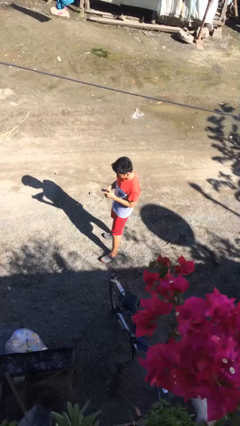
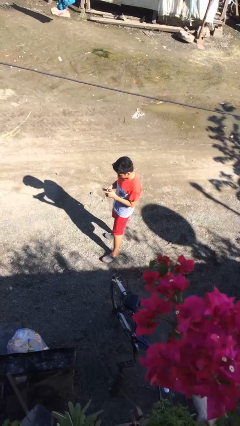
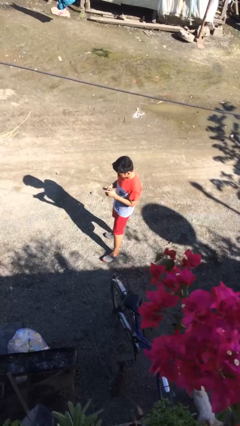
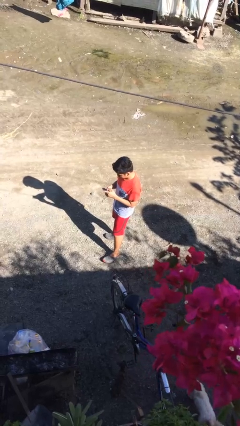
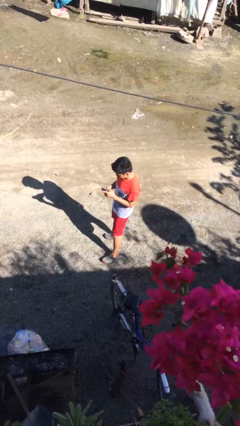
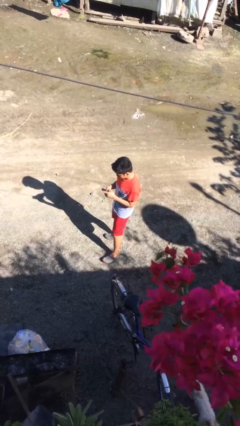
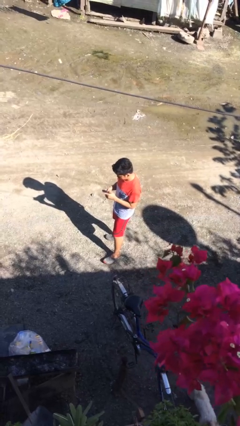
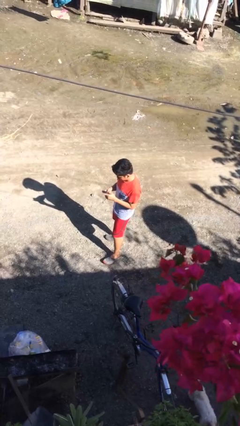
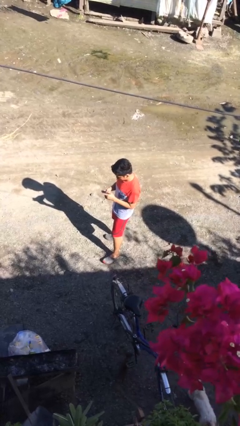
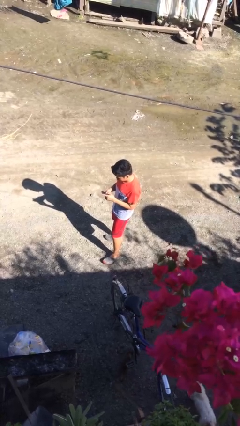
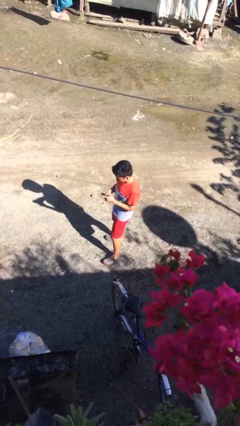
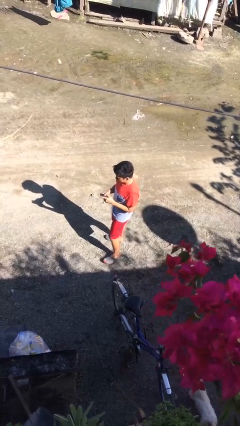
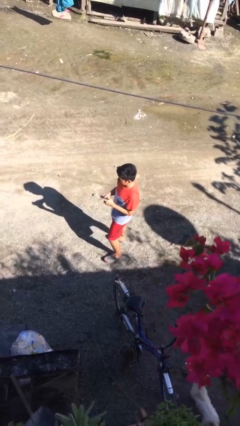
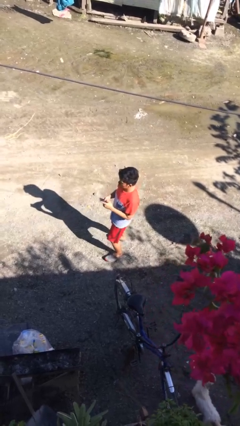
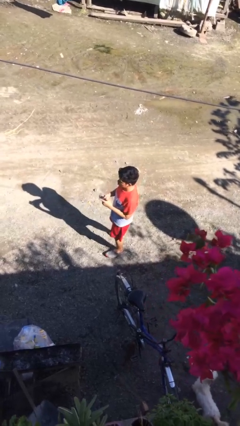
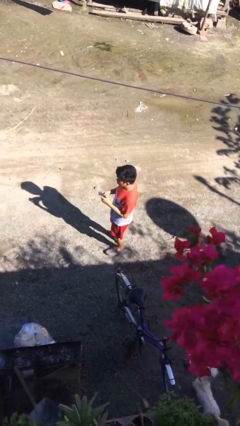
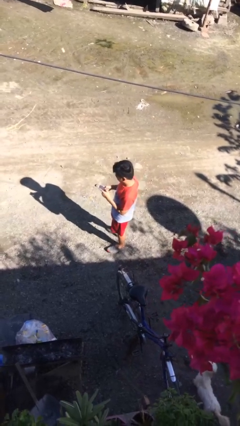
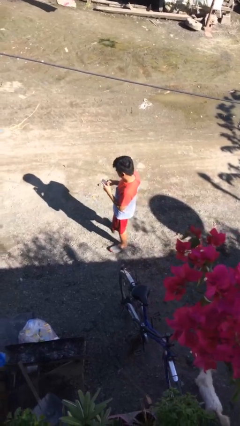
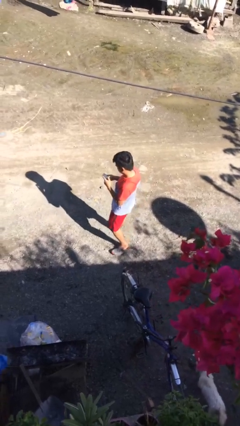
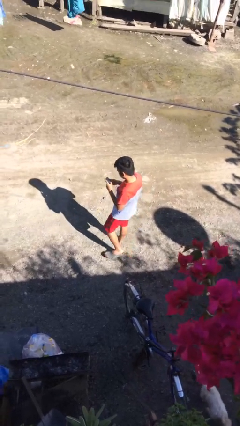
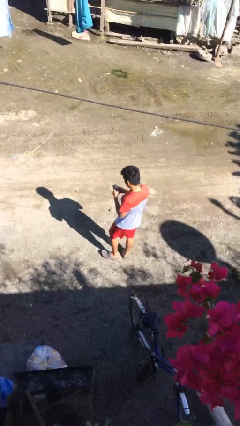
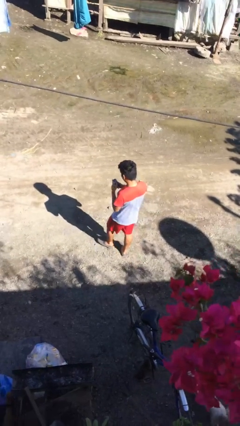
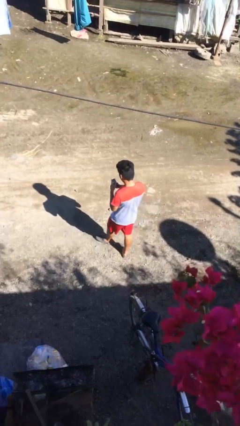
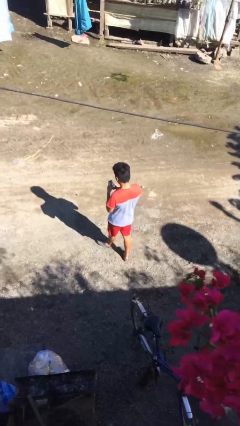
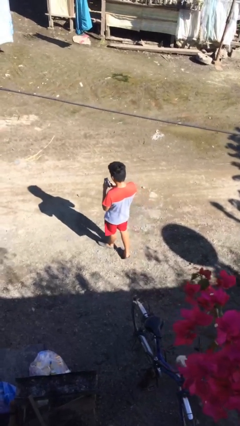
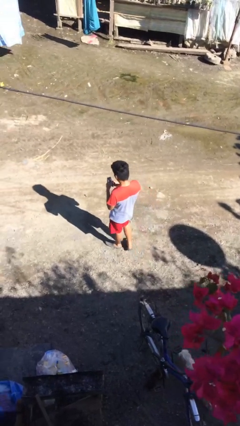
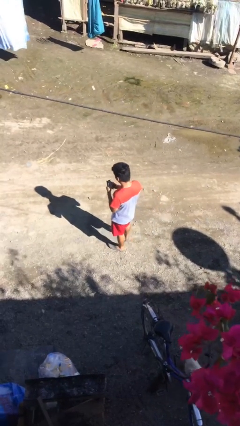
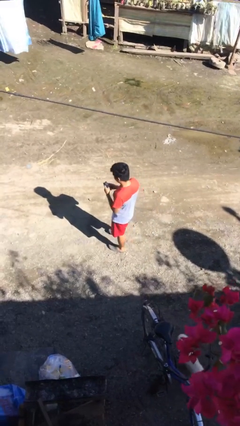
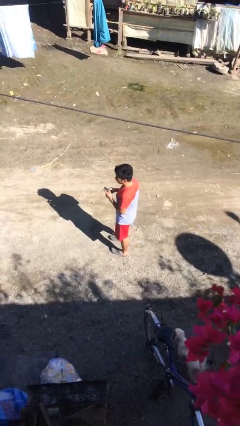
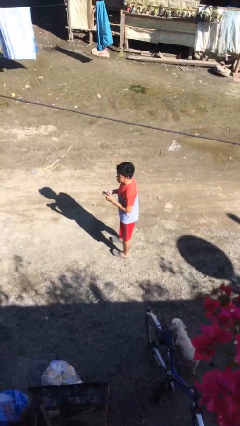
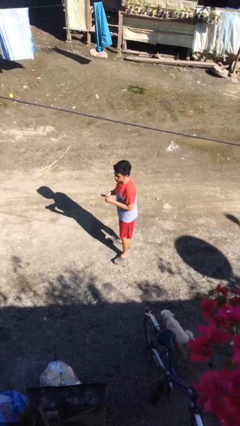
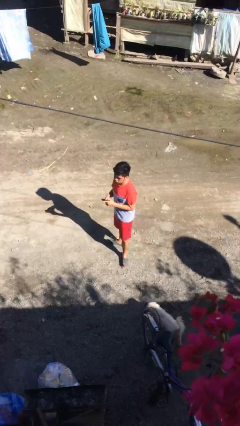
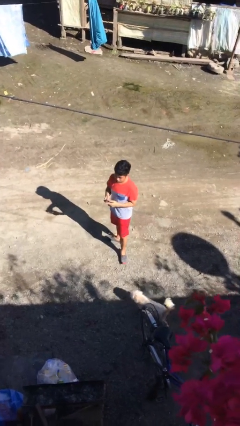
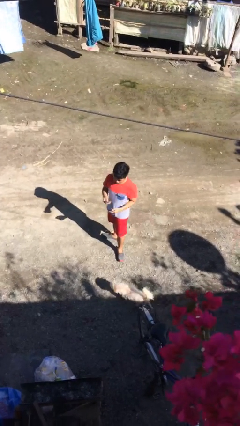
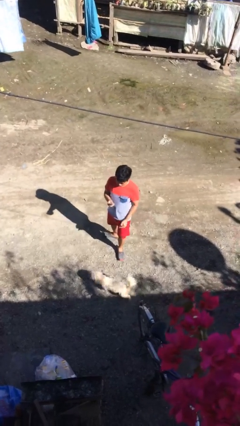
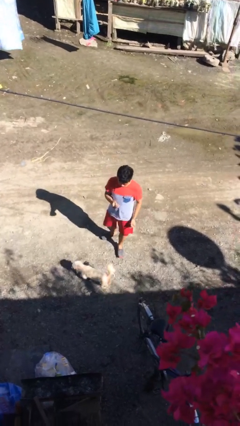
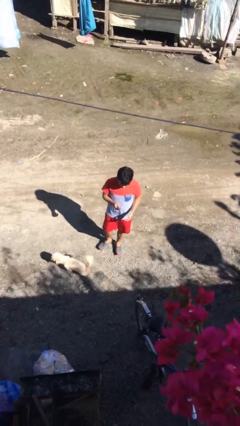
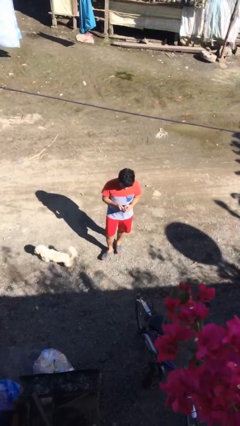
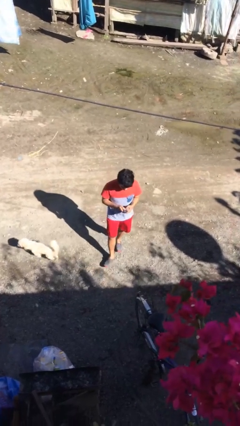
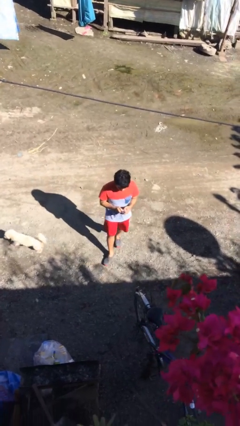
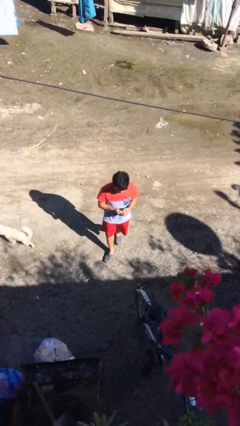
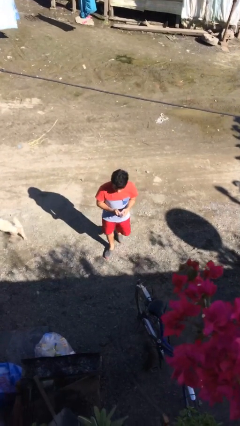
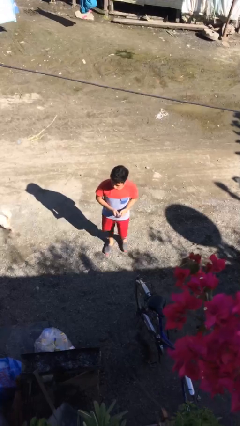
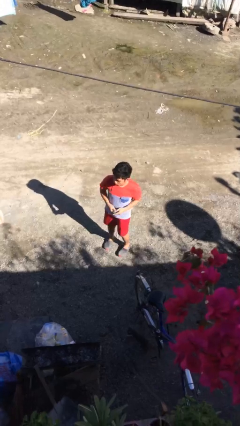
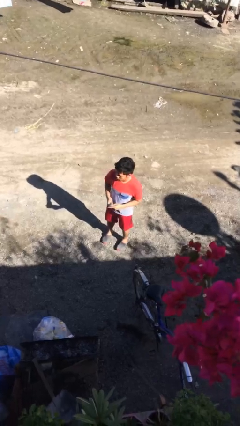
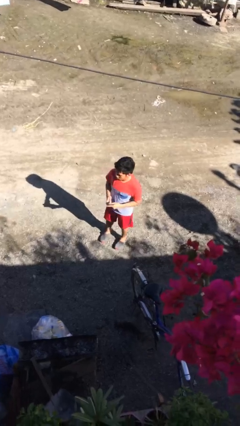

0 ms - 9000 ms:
person walks

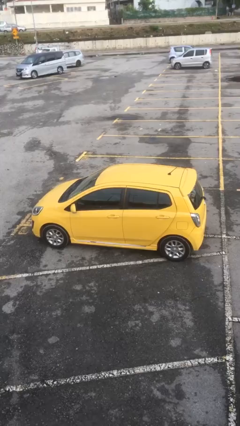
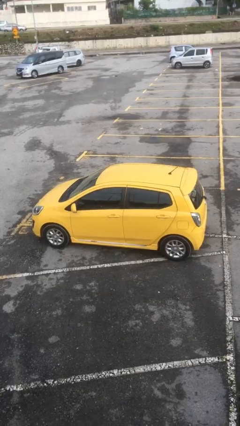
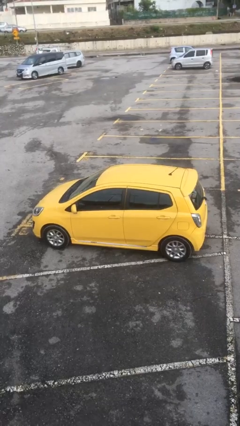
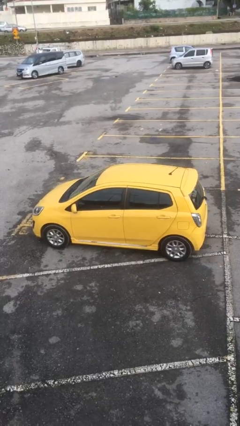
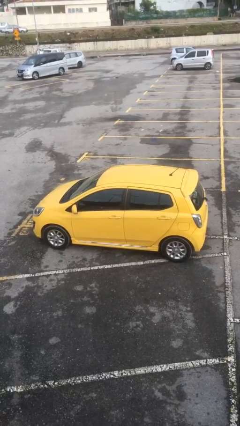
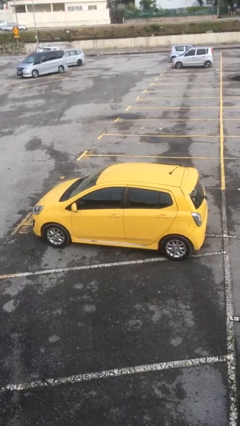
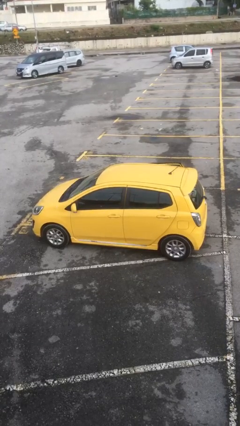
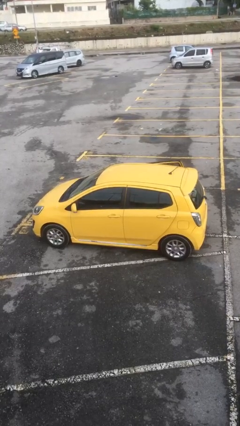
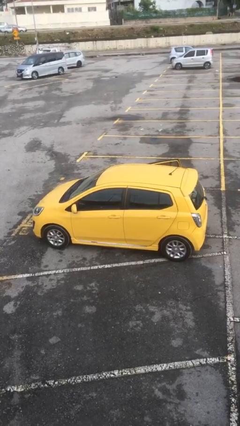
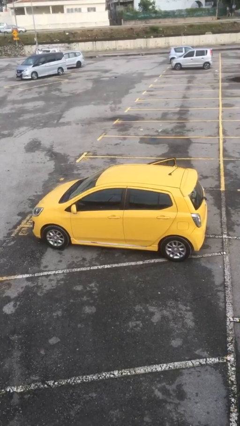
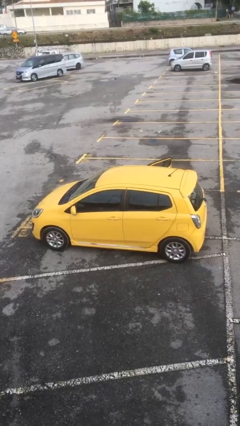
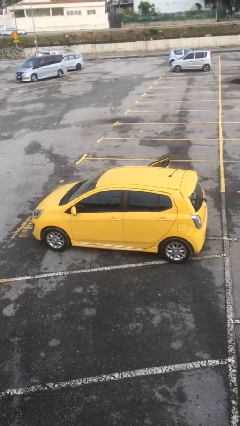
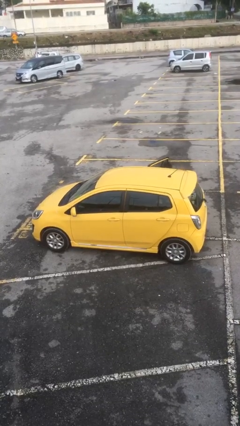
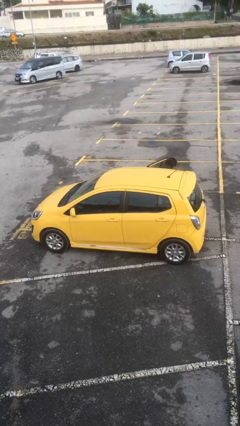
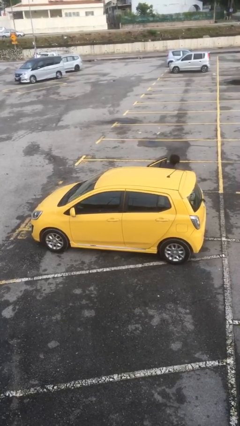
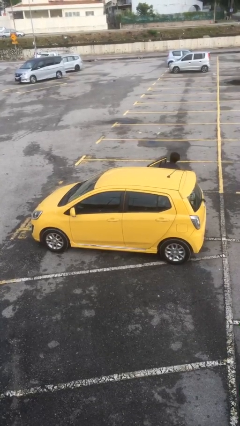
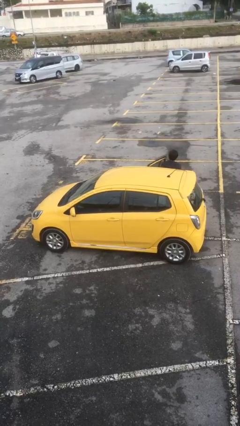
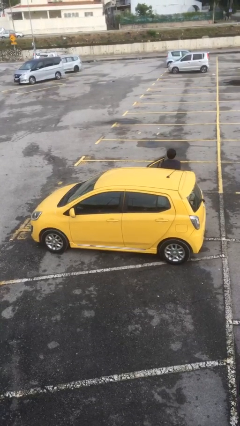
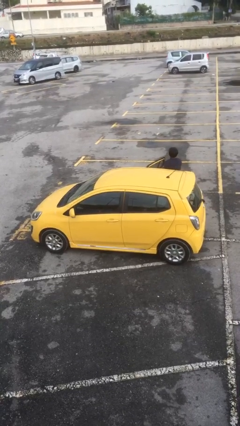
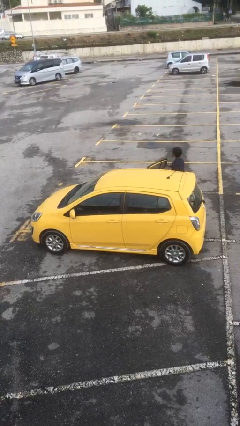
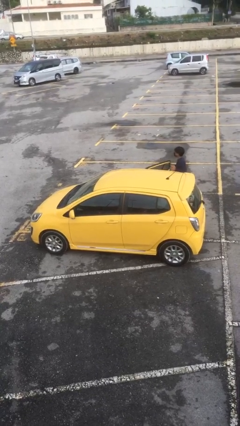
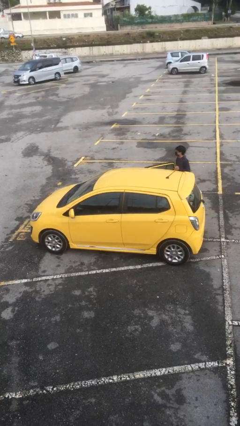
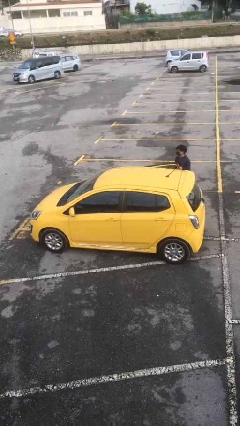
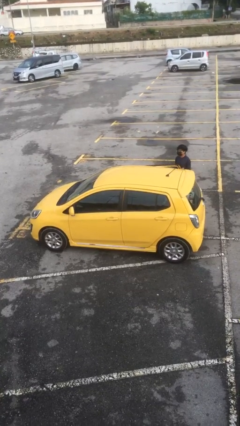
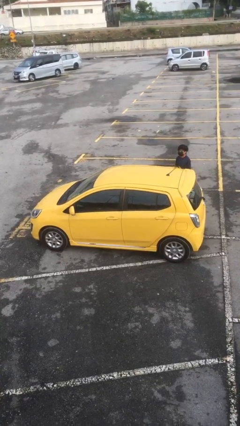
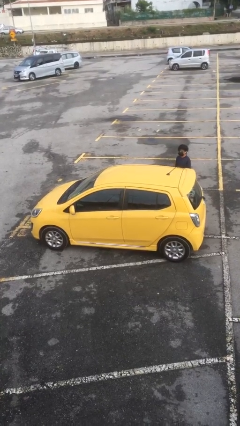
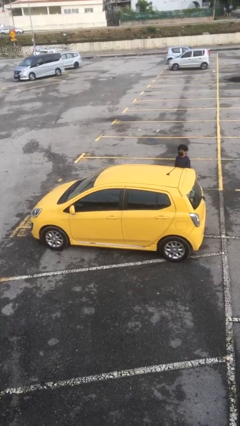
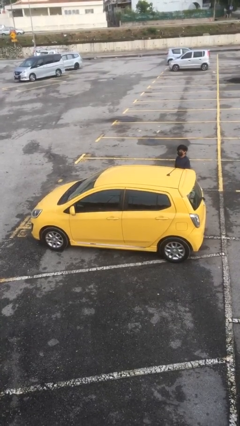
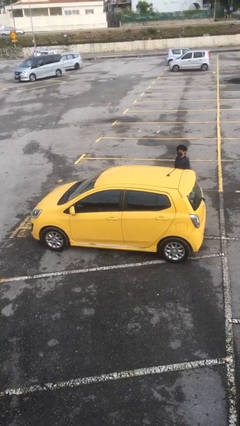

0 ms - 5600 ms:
car drops off person

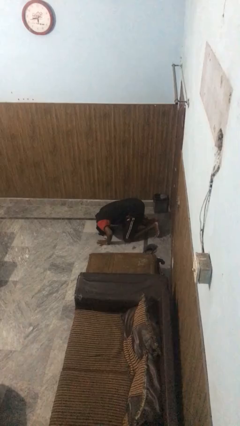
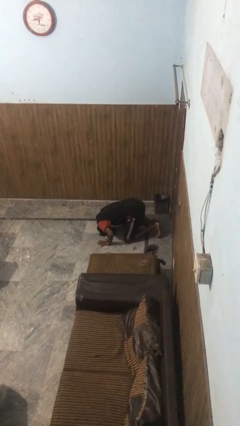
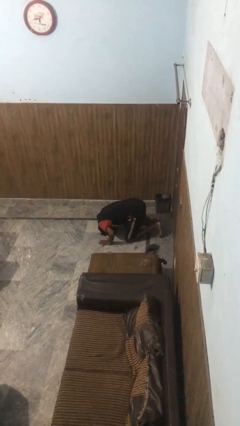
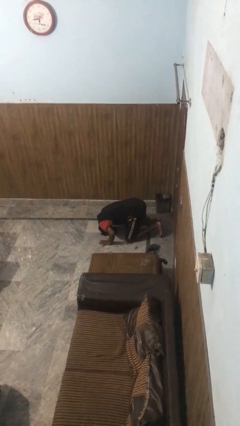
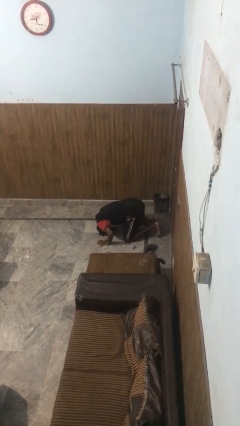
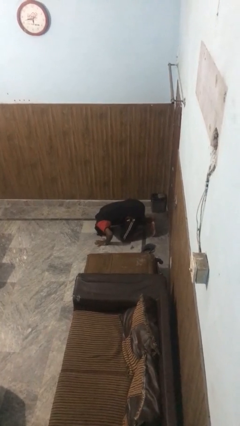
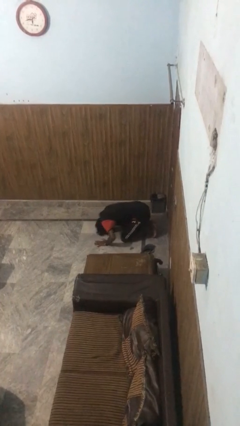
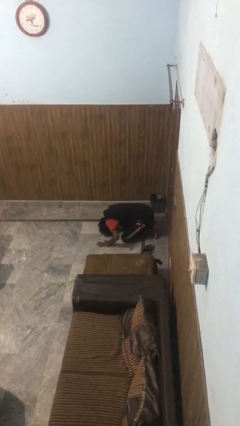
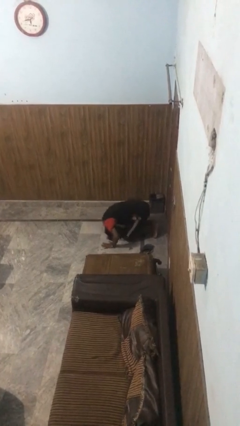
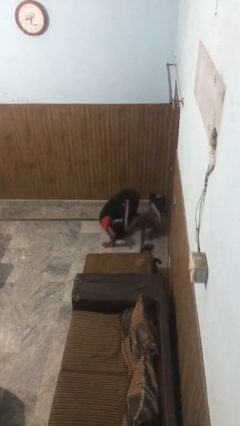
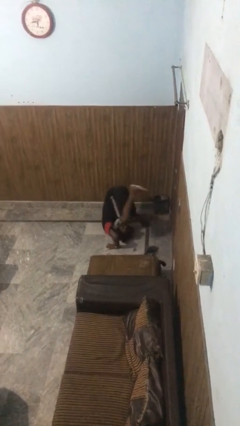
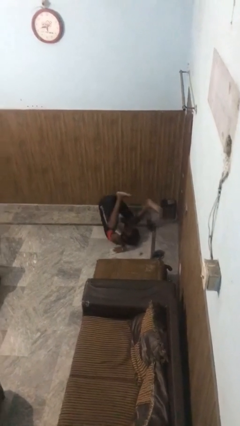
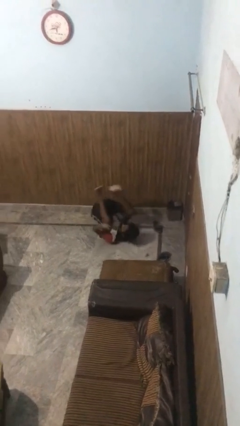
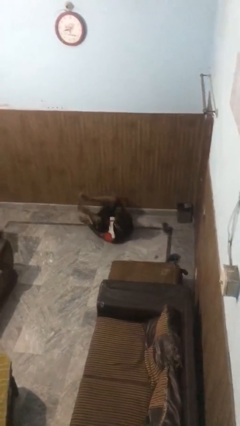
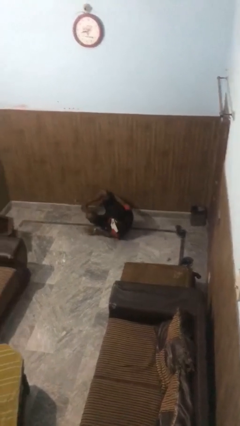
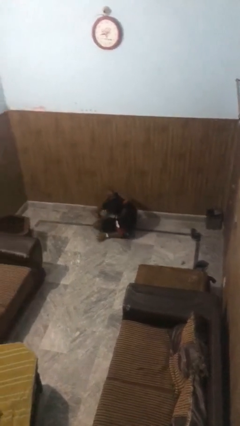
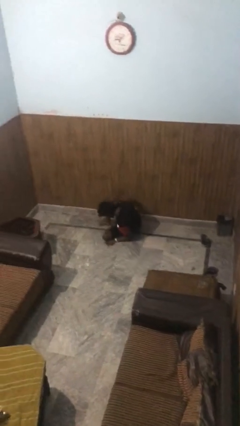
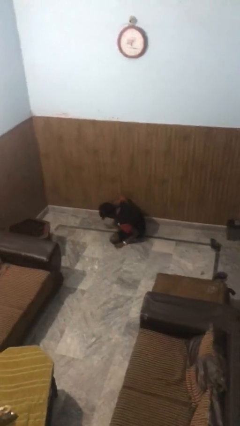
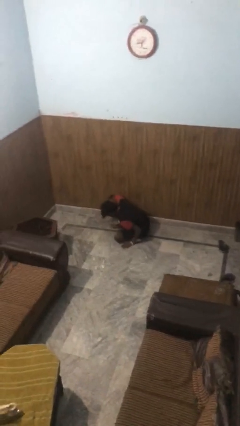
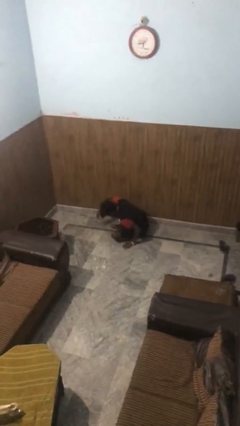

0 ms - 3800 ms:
person somersaults
